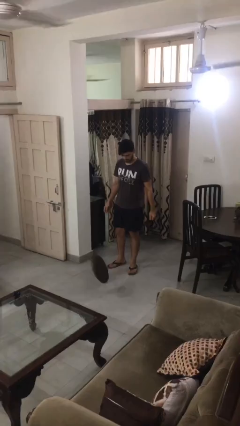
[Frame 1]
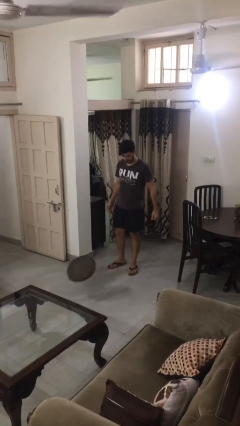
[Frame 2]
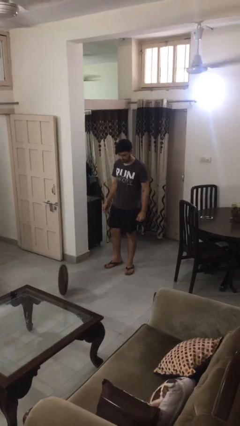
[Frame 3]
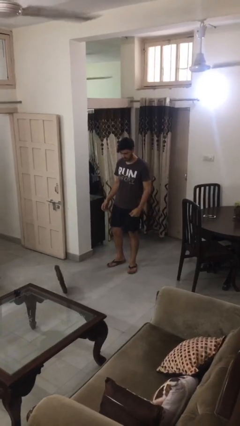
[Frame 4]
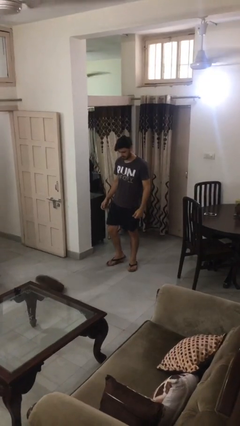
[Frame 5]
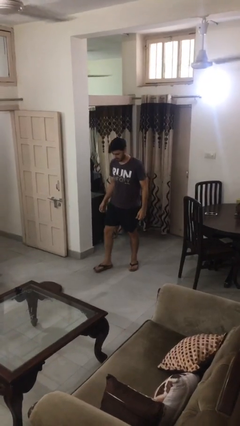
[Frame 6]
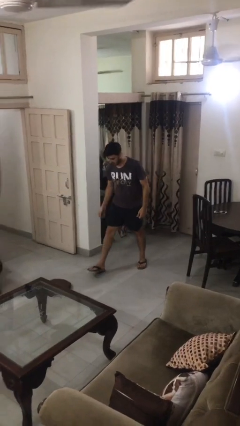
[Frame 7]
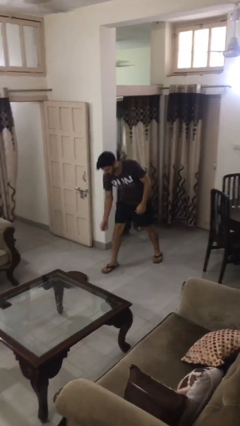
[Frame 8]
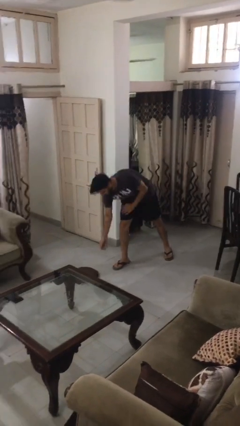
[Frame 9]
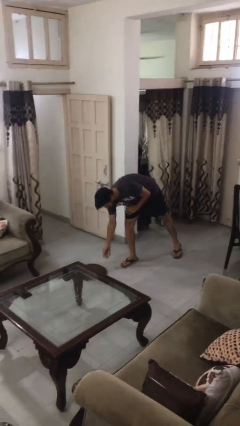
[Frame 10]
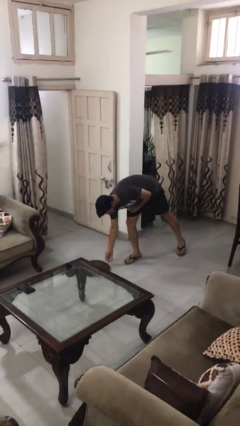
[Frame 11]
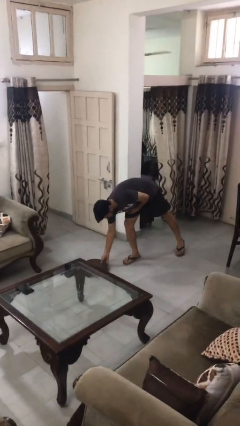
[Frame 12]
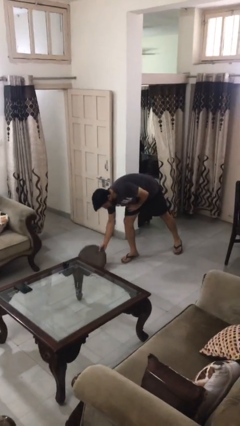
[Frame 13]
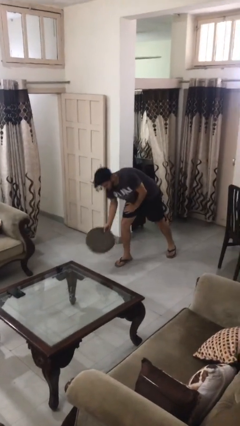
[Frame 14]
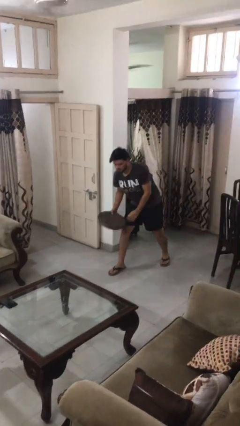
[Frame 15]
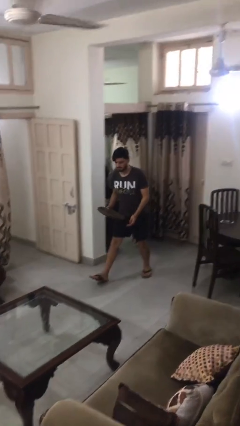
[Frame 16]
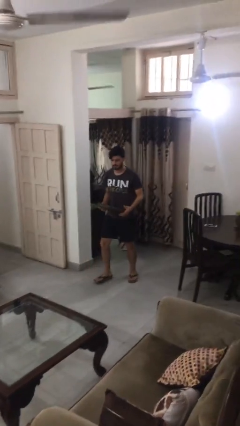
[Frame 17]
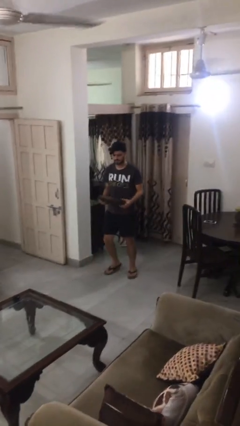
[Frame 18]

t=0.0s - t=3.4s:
person picks up object from floor

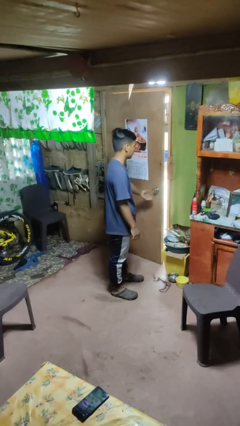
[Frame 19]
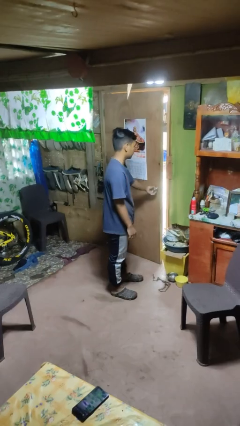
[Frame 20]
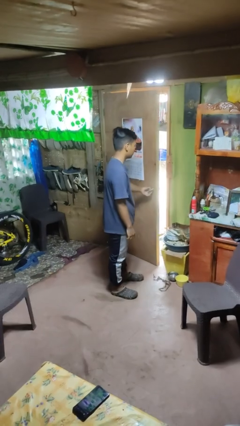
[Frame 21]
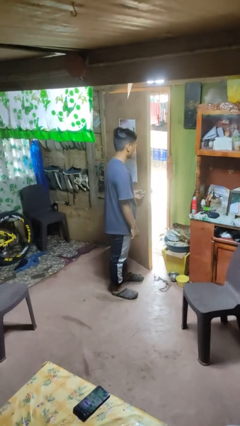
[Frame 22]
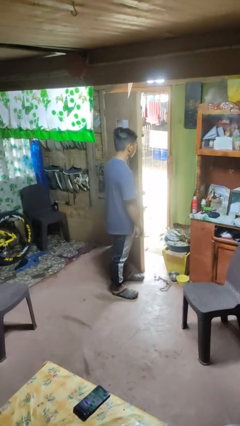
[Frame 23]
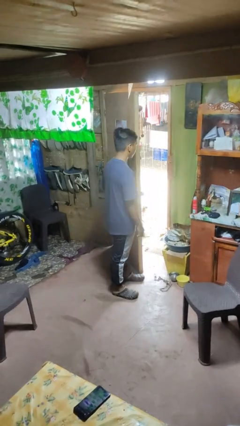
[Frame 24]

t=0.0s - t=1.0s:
person opens facility door

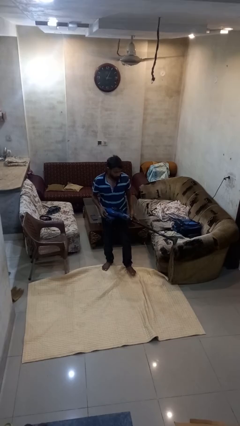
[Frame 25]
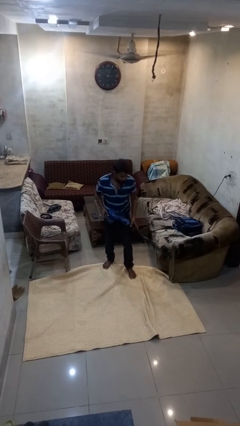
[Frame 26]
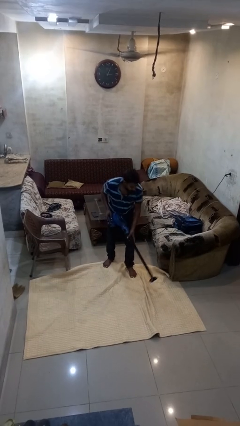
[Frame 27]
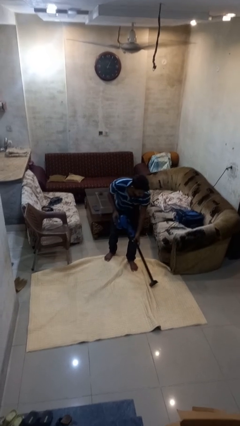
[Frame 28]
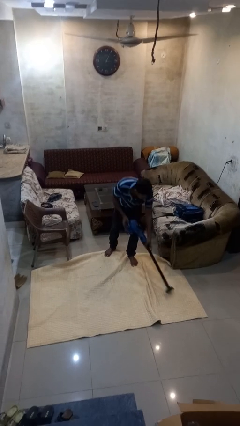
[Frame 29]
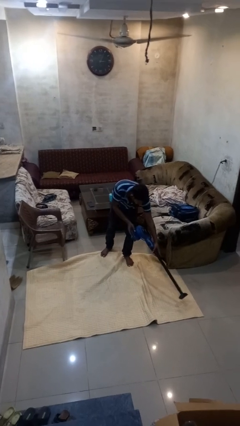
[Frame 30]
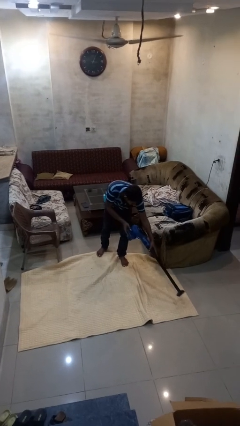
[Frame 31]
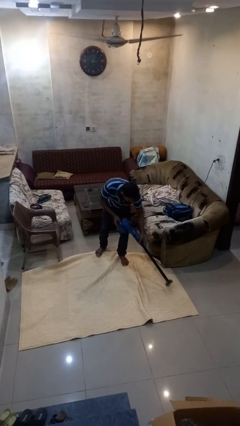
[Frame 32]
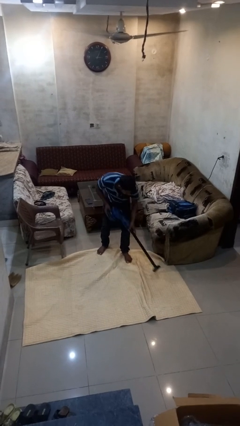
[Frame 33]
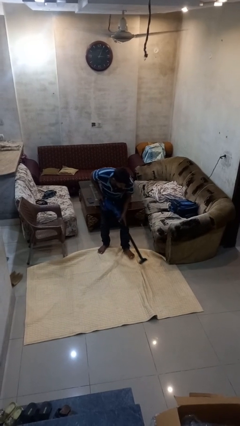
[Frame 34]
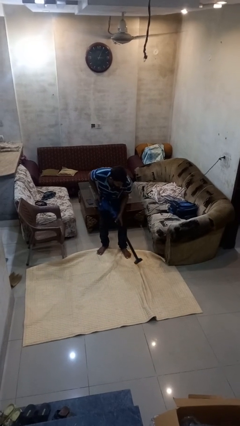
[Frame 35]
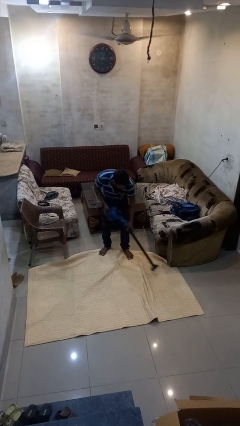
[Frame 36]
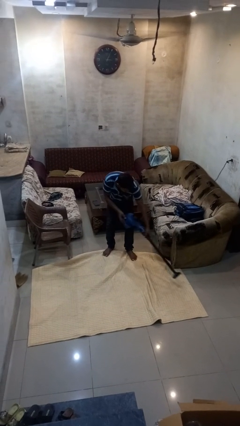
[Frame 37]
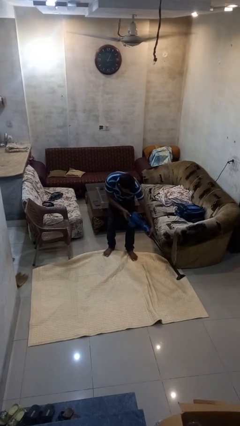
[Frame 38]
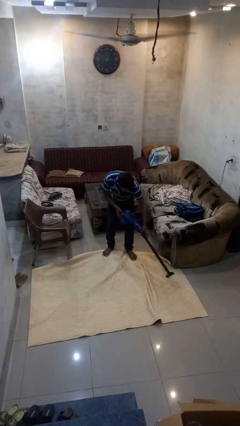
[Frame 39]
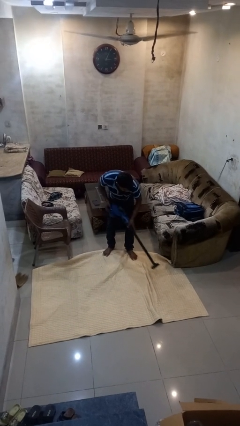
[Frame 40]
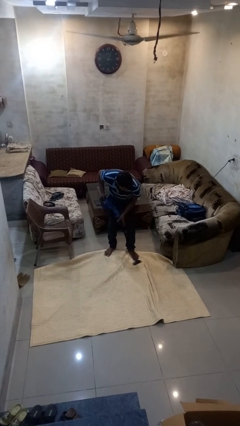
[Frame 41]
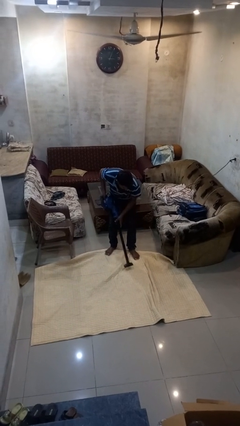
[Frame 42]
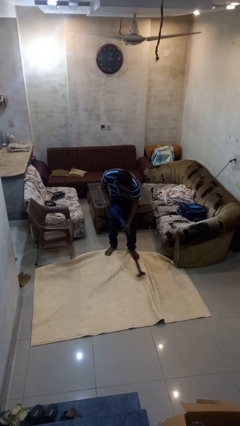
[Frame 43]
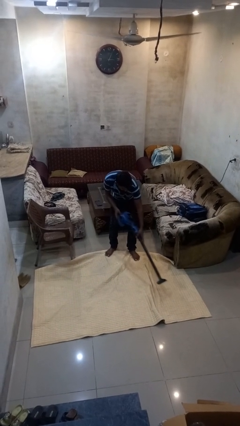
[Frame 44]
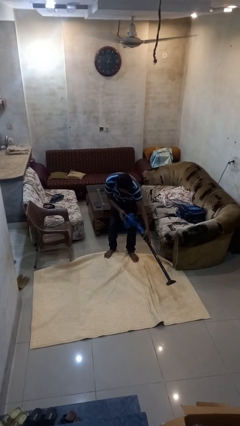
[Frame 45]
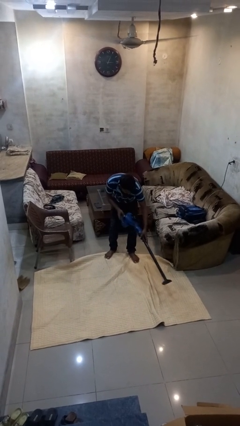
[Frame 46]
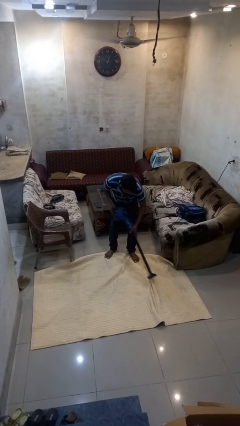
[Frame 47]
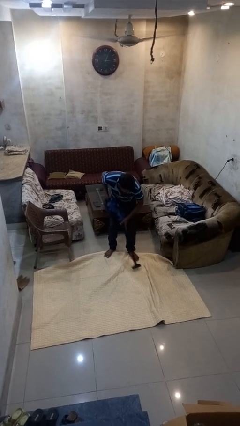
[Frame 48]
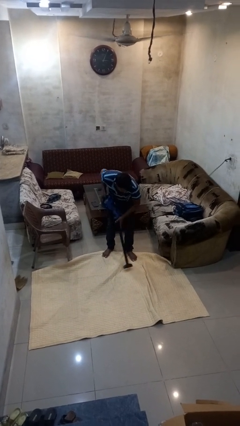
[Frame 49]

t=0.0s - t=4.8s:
person vacuums carpet

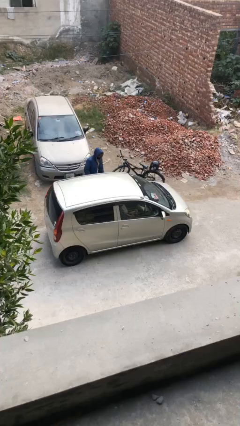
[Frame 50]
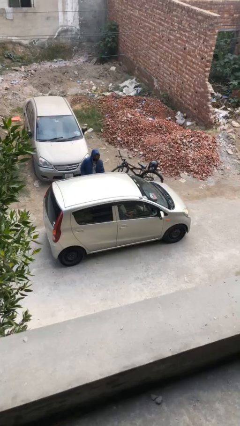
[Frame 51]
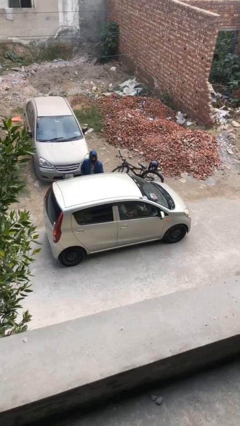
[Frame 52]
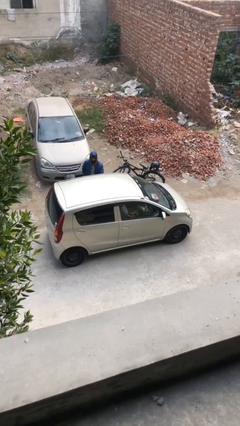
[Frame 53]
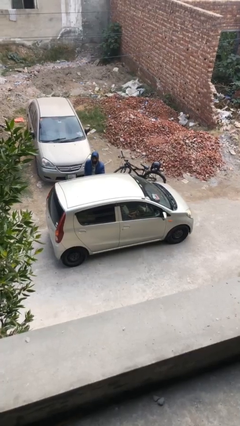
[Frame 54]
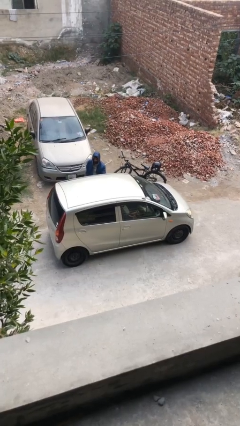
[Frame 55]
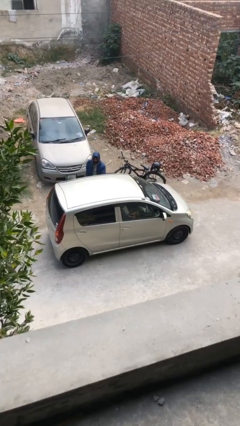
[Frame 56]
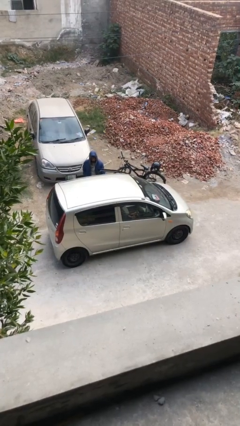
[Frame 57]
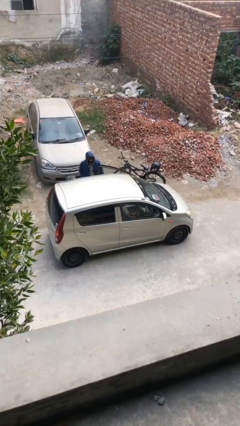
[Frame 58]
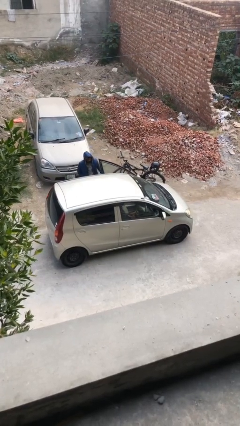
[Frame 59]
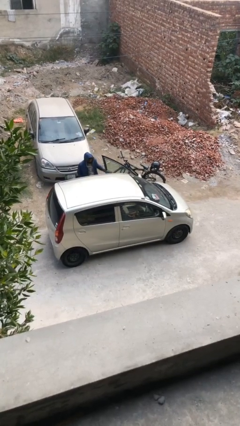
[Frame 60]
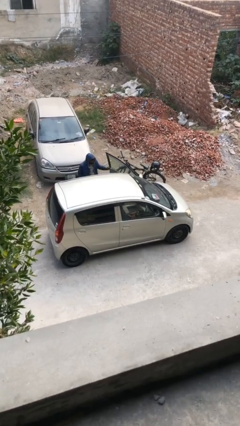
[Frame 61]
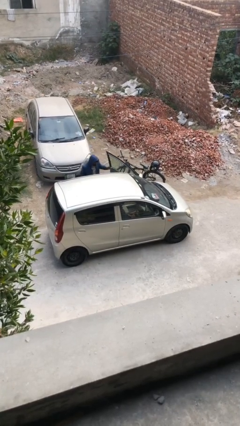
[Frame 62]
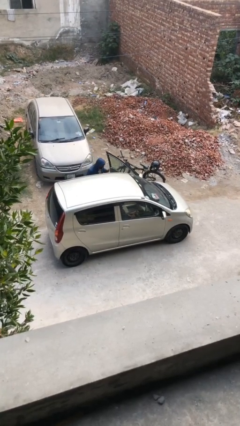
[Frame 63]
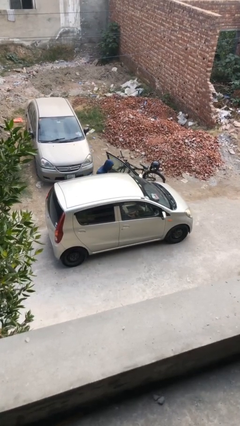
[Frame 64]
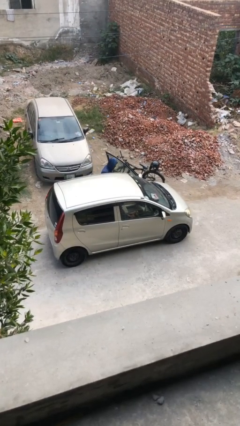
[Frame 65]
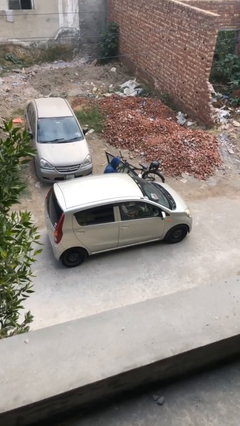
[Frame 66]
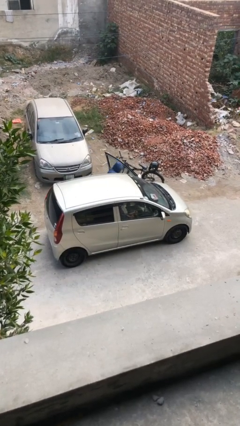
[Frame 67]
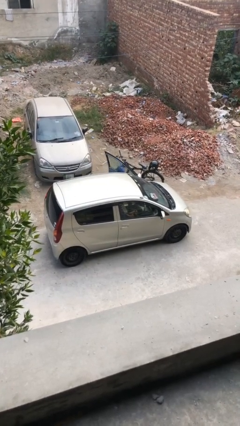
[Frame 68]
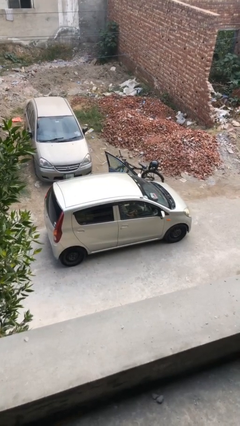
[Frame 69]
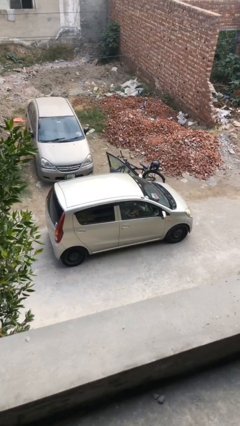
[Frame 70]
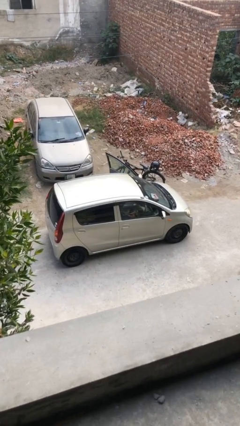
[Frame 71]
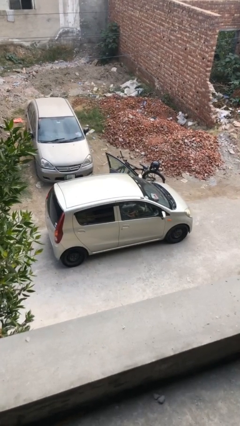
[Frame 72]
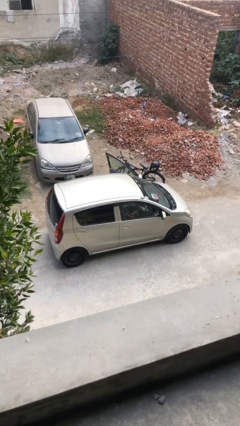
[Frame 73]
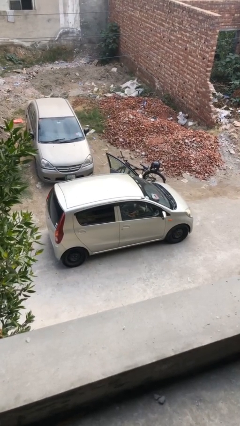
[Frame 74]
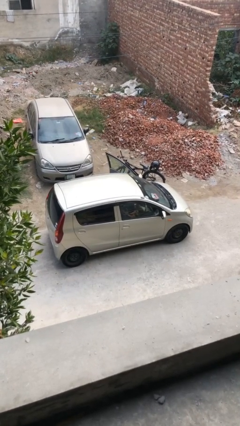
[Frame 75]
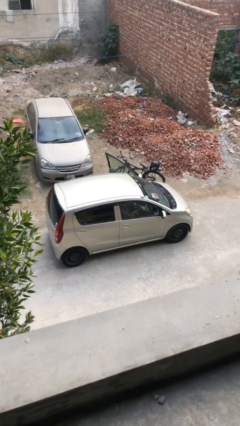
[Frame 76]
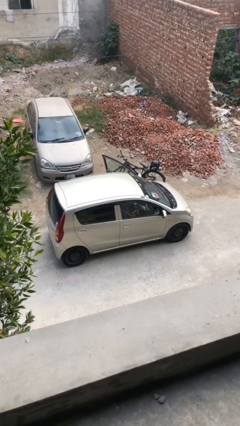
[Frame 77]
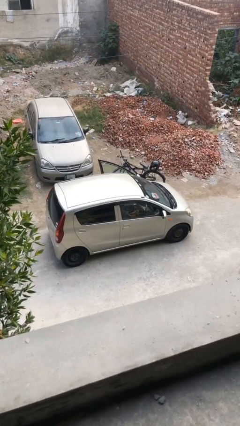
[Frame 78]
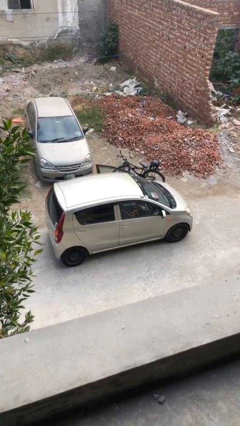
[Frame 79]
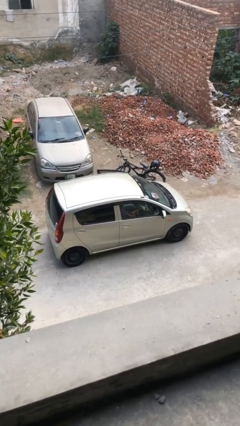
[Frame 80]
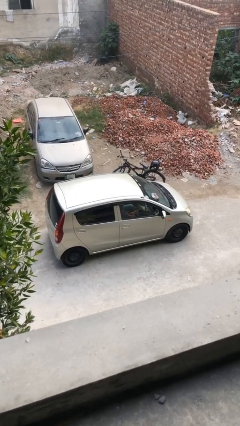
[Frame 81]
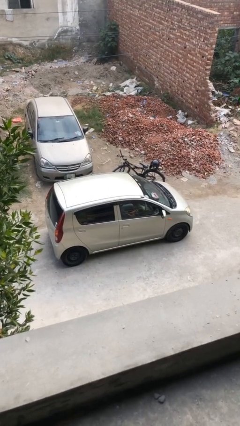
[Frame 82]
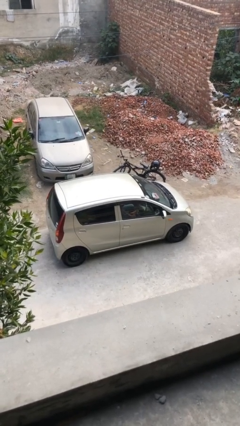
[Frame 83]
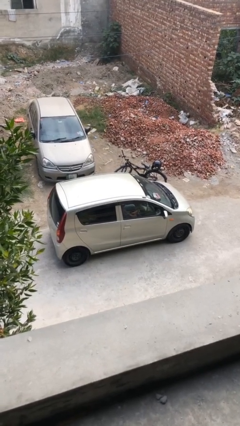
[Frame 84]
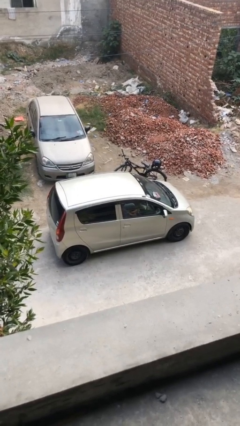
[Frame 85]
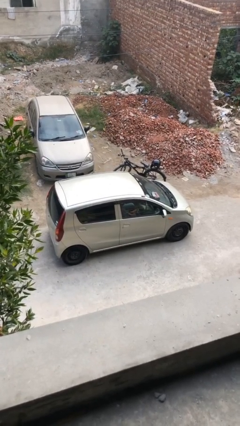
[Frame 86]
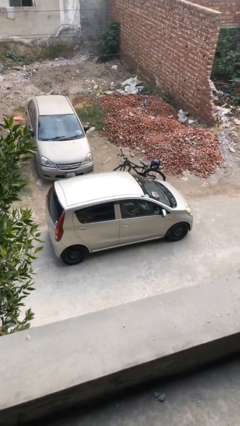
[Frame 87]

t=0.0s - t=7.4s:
car picks up person

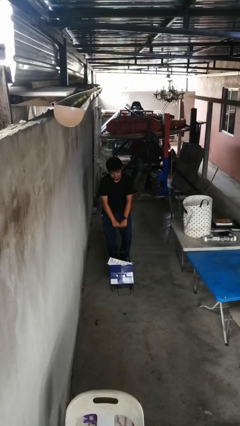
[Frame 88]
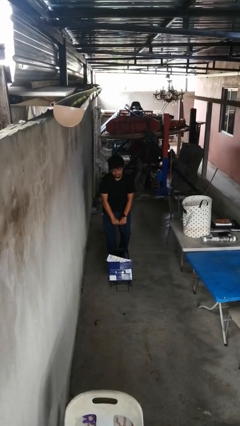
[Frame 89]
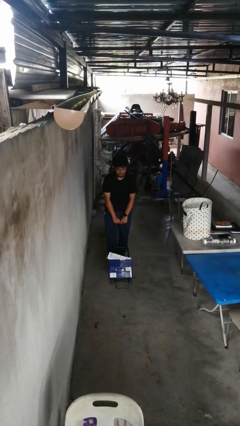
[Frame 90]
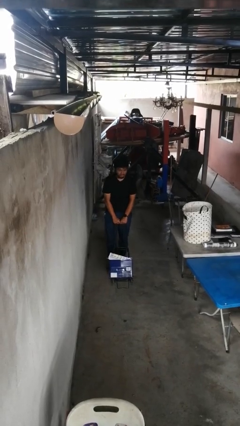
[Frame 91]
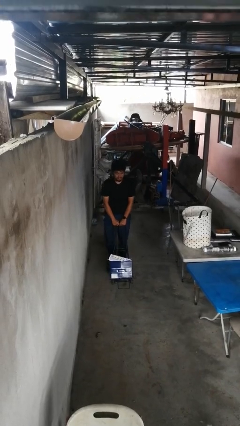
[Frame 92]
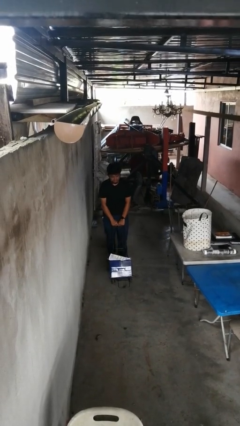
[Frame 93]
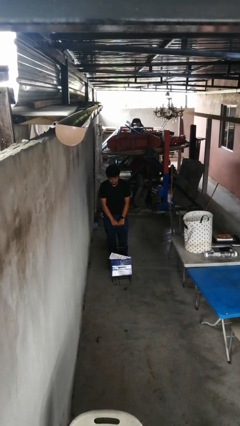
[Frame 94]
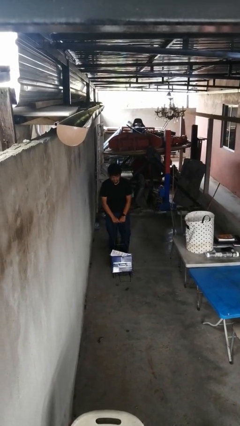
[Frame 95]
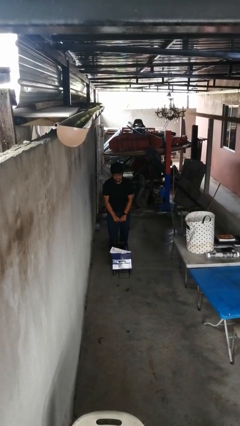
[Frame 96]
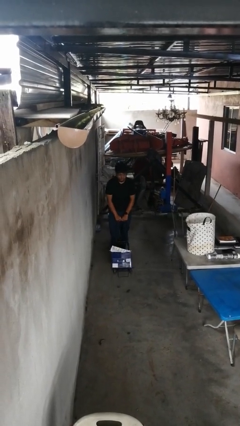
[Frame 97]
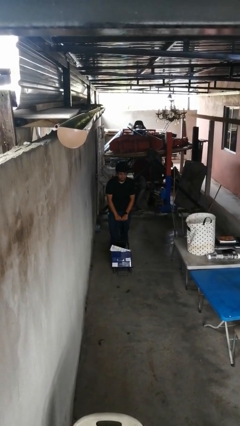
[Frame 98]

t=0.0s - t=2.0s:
person pulls wheeled cart
